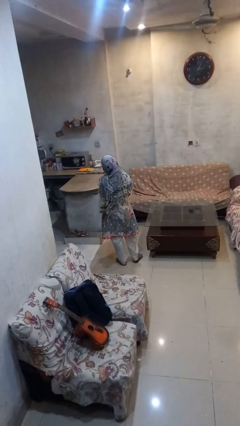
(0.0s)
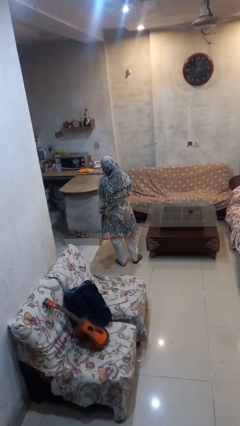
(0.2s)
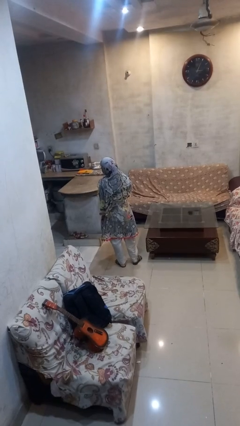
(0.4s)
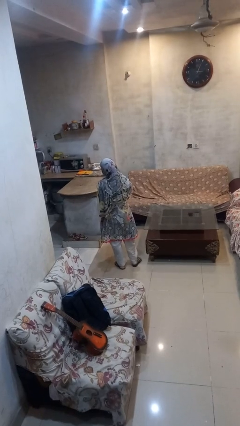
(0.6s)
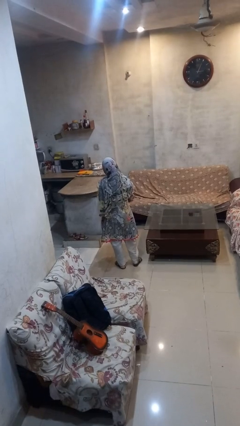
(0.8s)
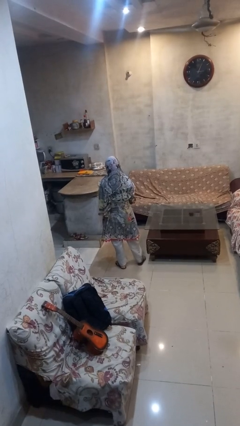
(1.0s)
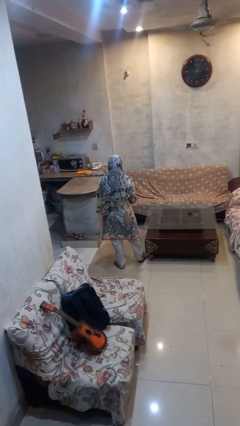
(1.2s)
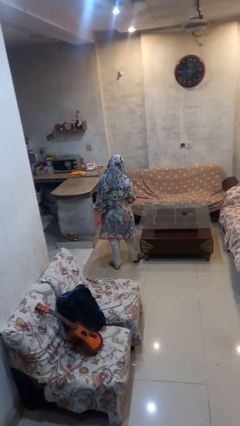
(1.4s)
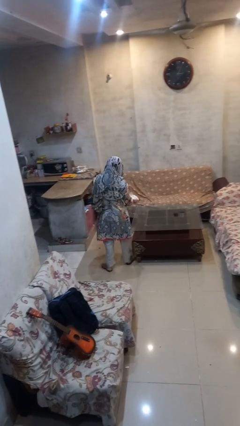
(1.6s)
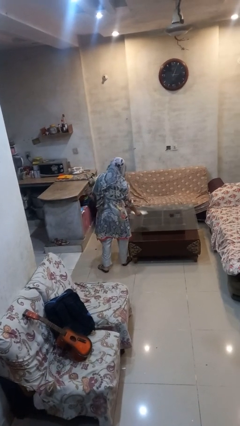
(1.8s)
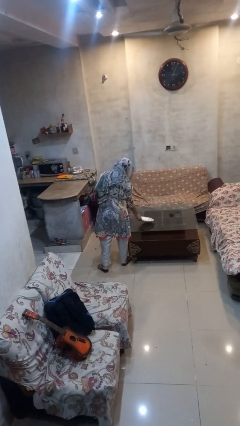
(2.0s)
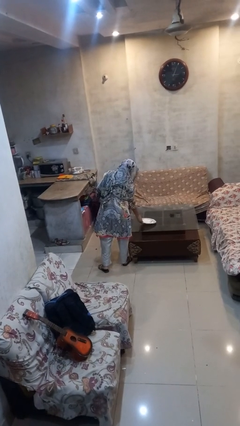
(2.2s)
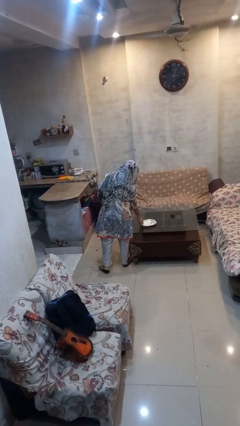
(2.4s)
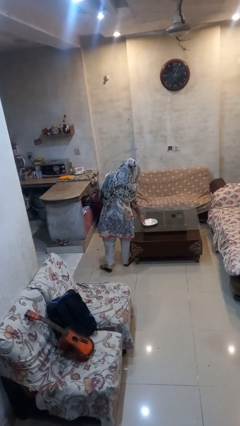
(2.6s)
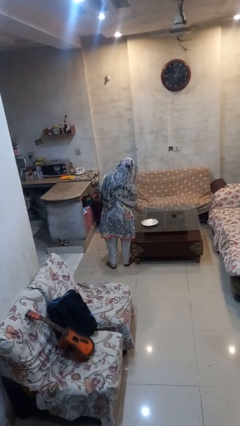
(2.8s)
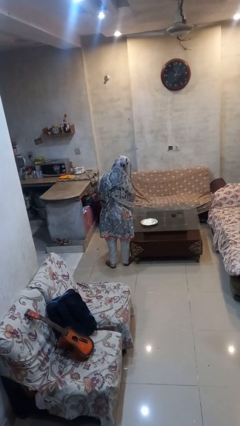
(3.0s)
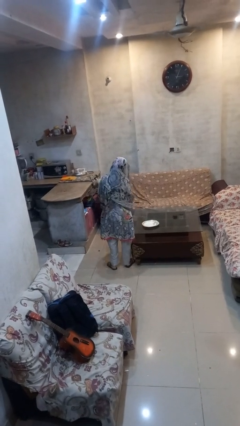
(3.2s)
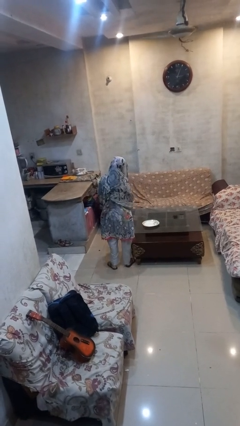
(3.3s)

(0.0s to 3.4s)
person sets table

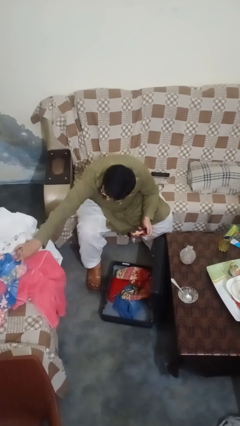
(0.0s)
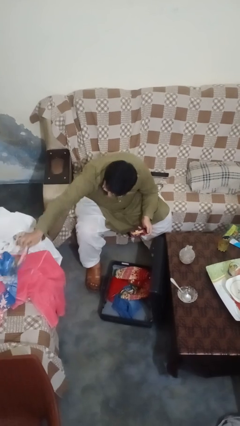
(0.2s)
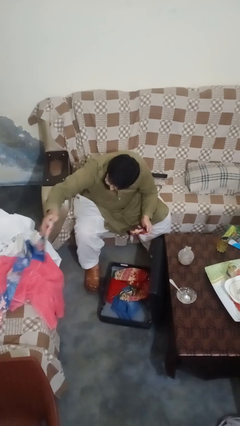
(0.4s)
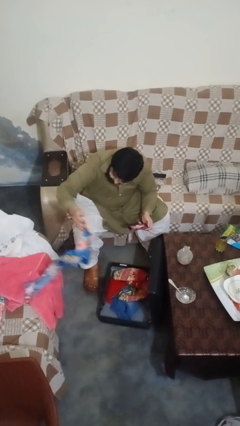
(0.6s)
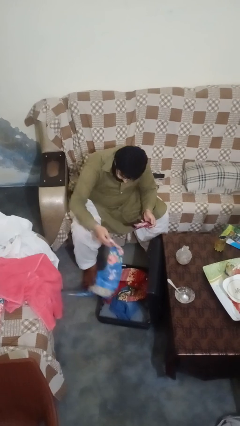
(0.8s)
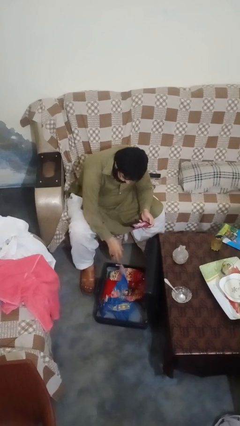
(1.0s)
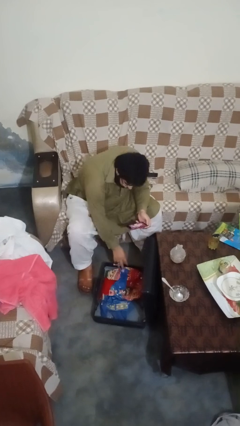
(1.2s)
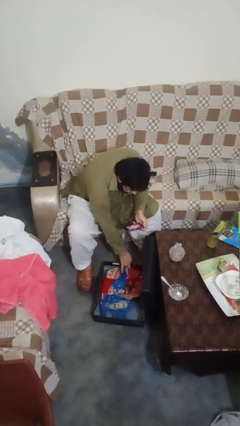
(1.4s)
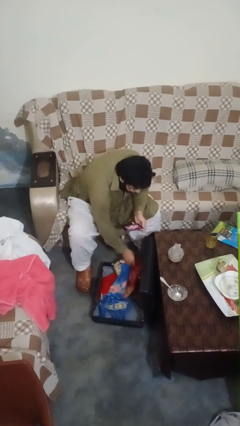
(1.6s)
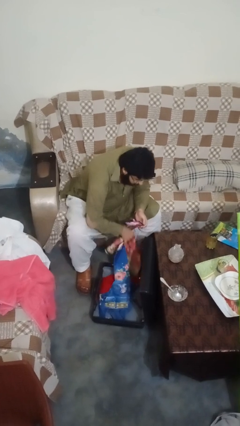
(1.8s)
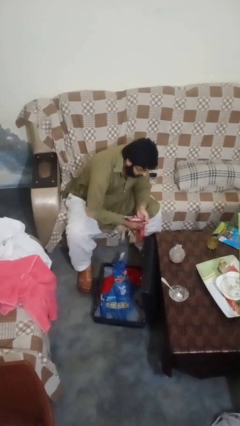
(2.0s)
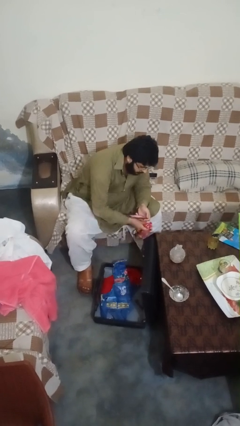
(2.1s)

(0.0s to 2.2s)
person loads clothes into suitcase

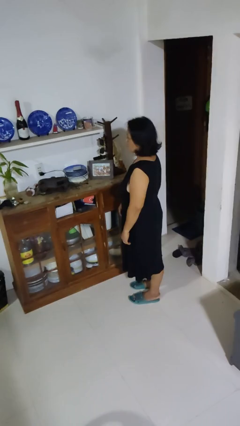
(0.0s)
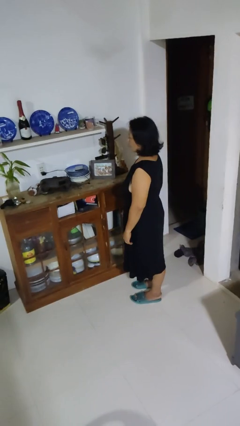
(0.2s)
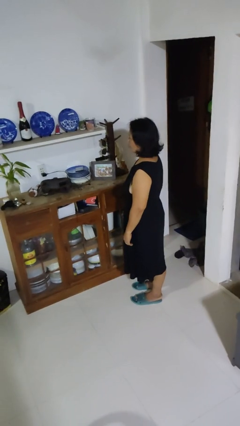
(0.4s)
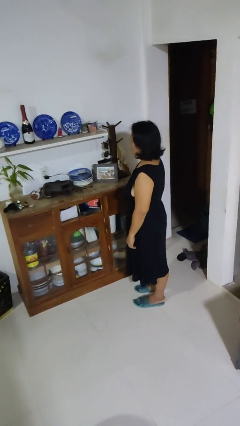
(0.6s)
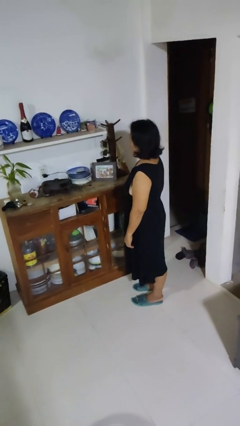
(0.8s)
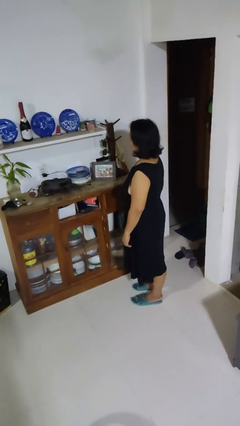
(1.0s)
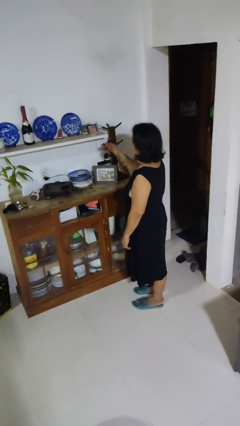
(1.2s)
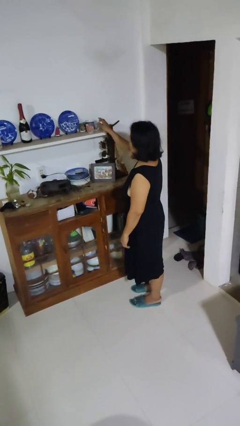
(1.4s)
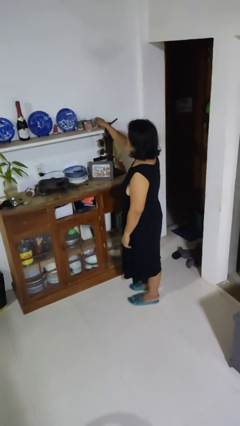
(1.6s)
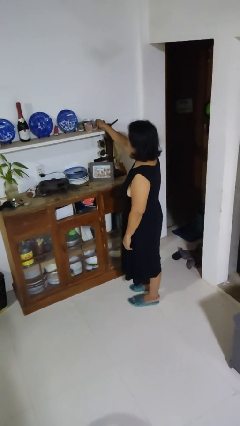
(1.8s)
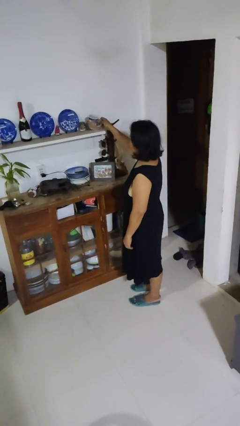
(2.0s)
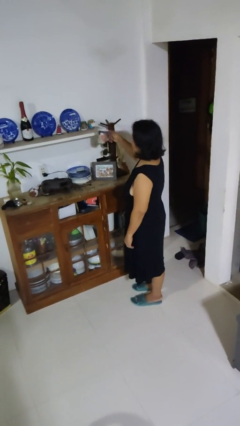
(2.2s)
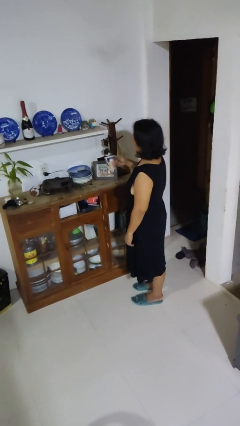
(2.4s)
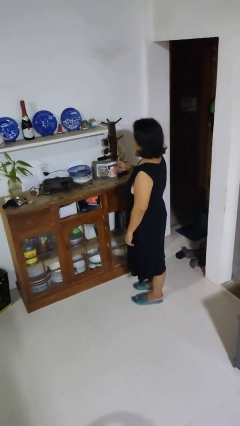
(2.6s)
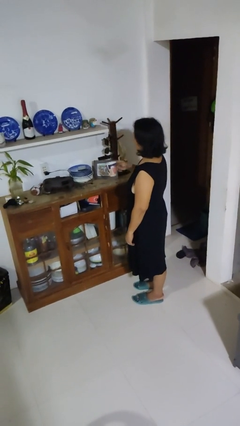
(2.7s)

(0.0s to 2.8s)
person picks up object from shelf

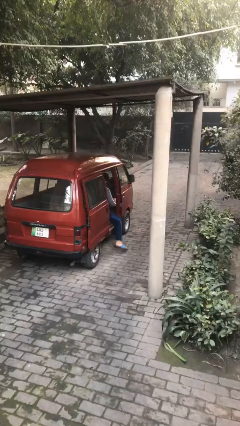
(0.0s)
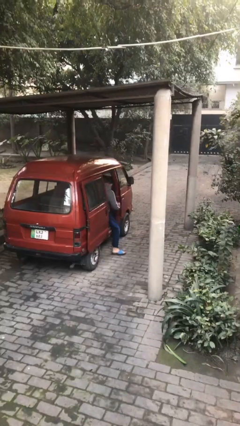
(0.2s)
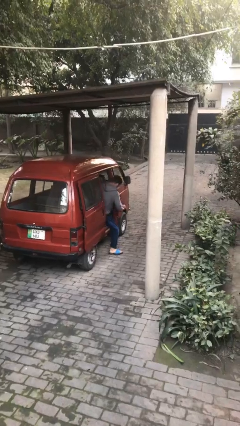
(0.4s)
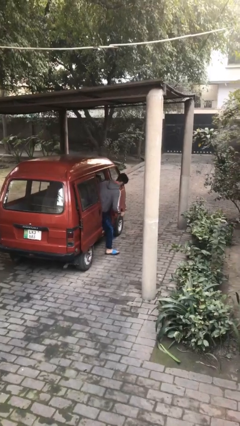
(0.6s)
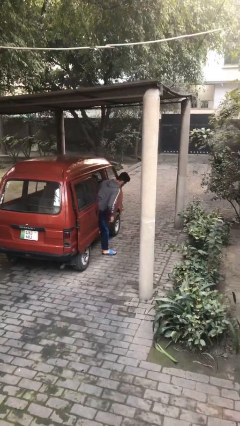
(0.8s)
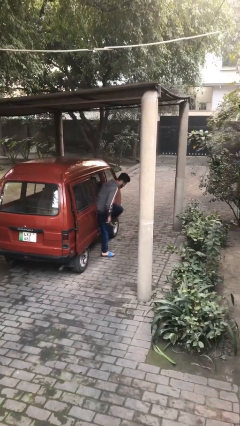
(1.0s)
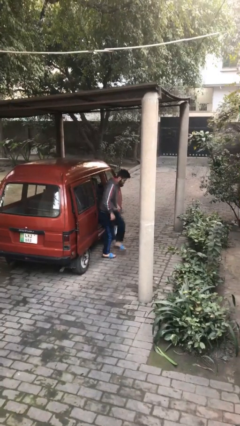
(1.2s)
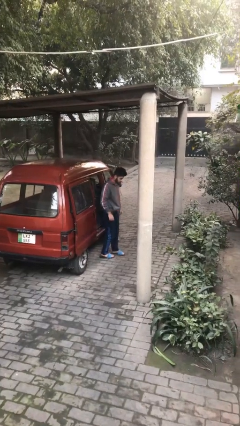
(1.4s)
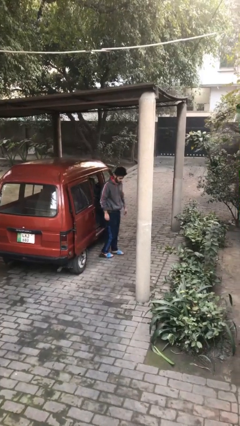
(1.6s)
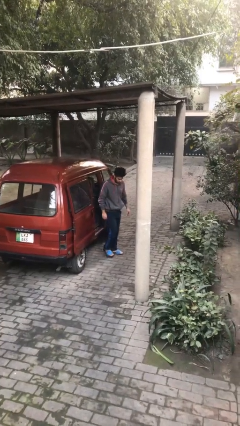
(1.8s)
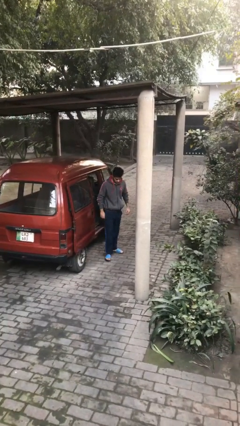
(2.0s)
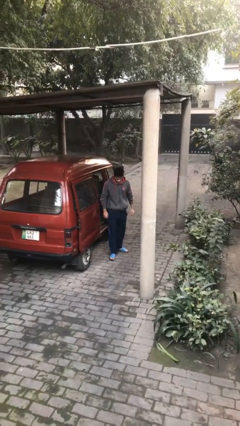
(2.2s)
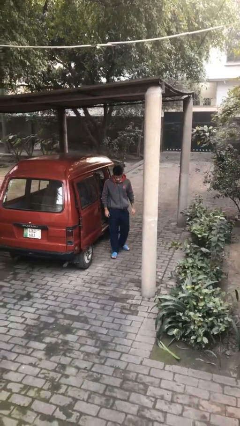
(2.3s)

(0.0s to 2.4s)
person exits car

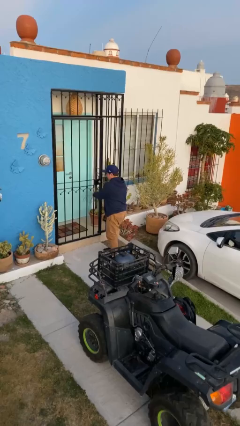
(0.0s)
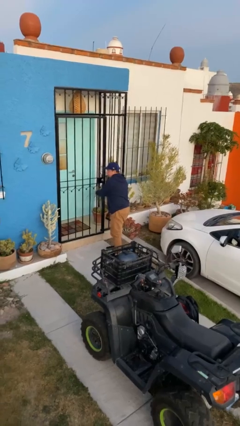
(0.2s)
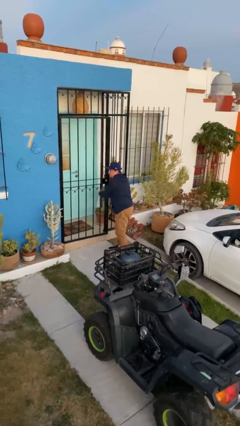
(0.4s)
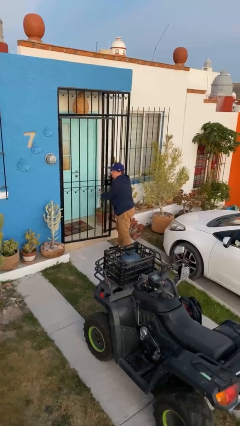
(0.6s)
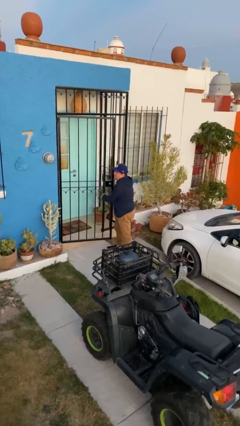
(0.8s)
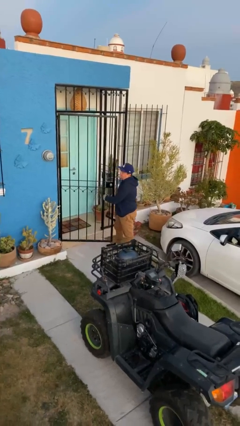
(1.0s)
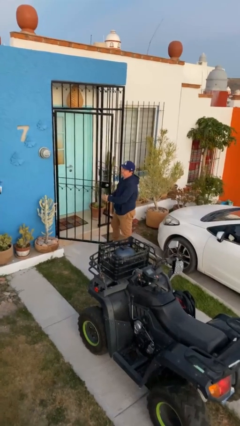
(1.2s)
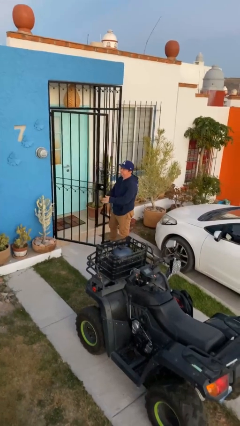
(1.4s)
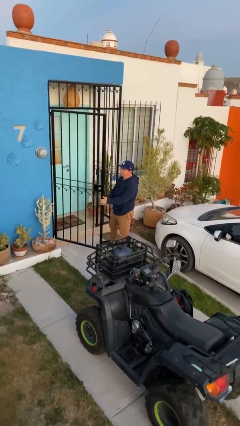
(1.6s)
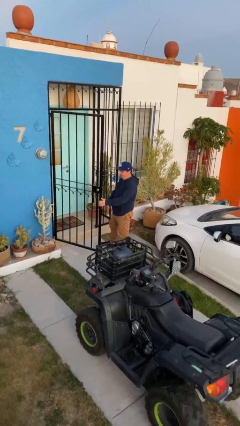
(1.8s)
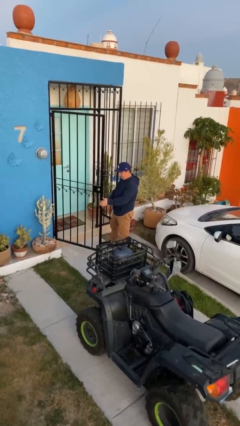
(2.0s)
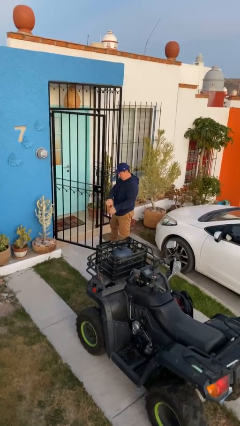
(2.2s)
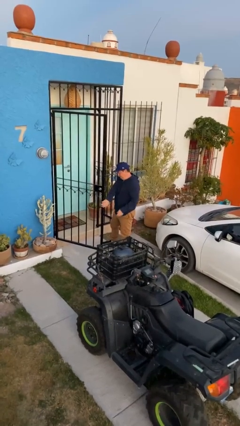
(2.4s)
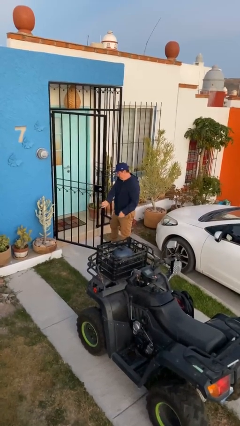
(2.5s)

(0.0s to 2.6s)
person opens facility door

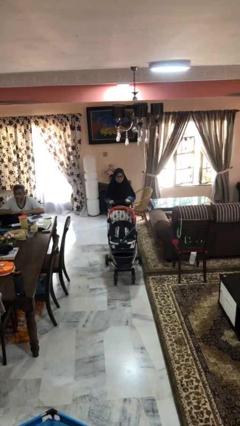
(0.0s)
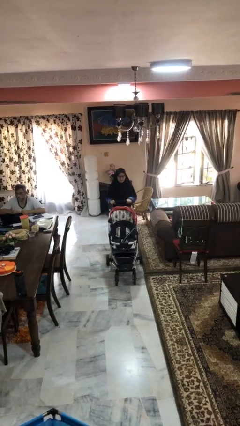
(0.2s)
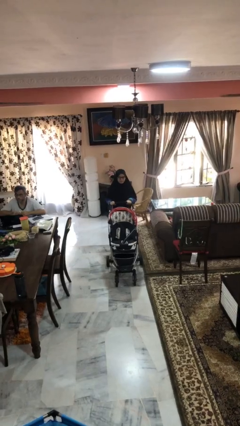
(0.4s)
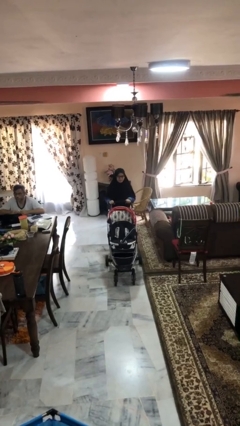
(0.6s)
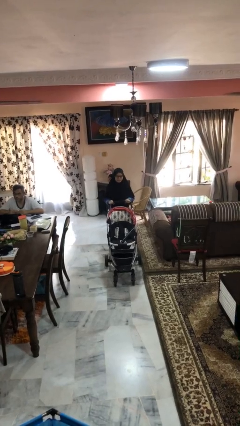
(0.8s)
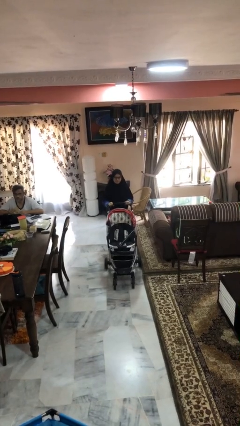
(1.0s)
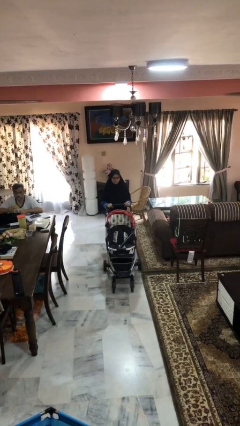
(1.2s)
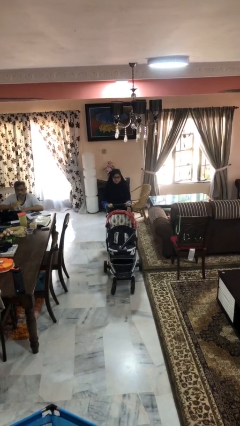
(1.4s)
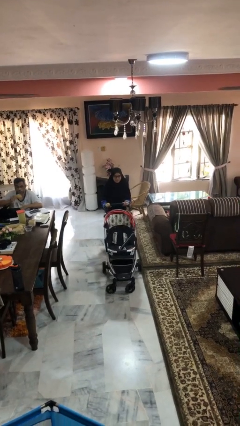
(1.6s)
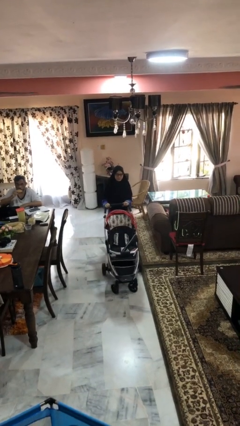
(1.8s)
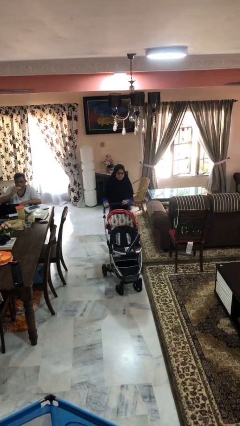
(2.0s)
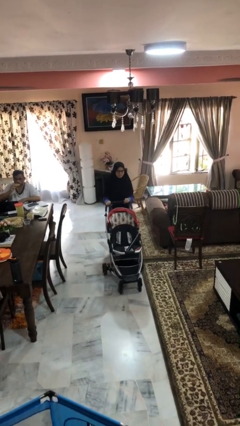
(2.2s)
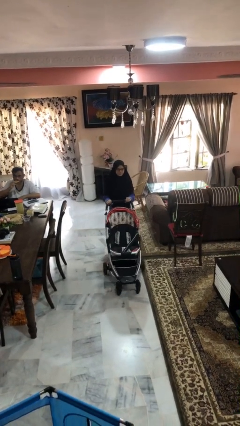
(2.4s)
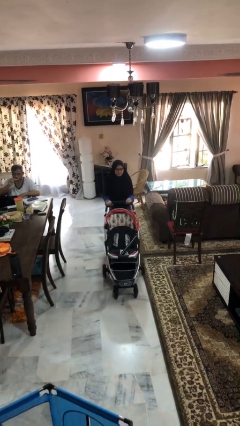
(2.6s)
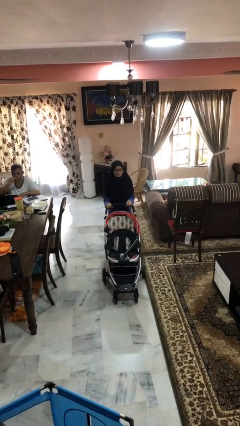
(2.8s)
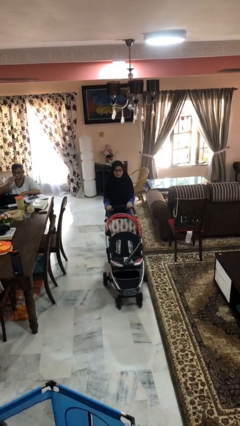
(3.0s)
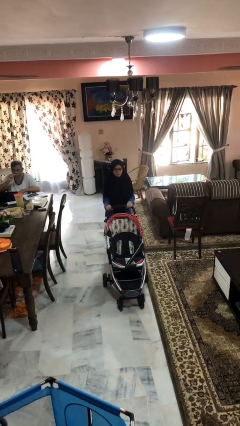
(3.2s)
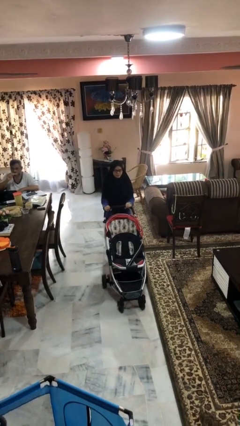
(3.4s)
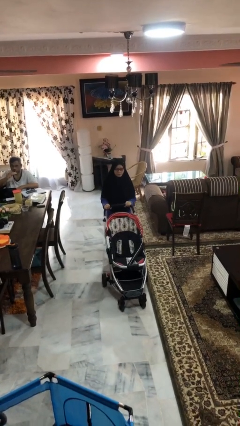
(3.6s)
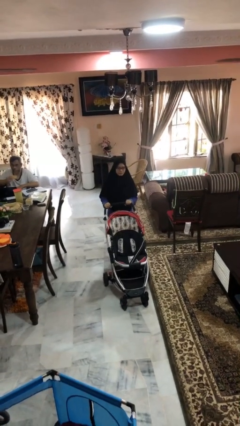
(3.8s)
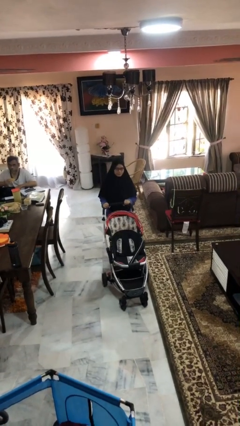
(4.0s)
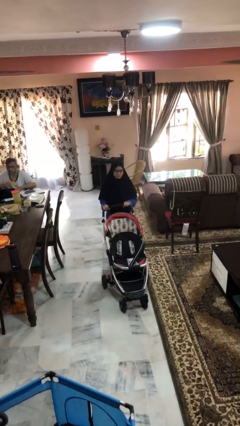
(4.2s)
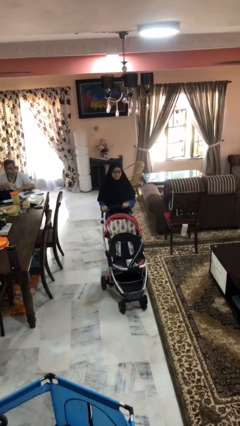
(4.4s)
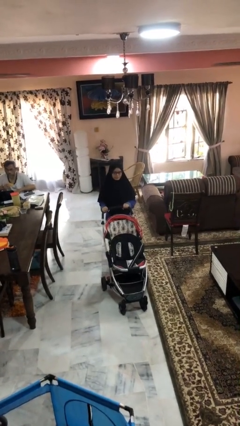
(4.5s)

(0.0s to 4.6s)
person pushes wheeled cart
